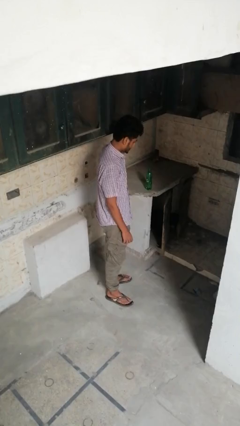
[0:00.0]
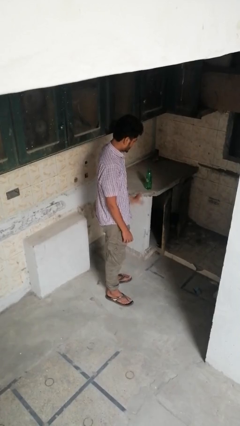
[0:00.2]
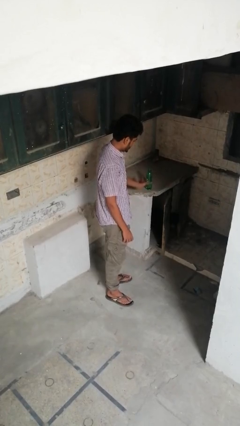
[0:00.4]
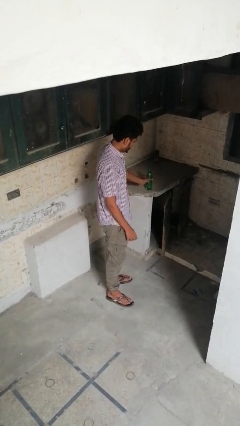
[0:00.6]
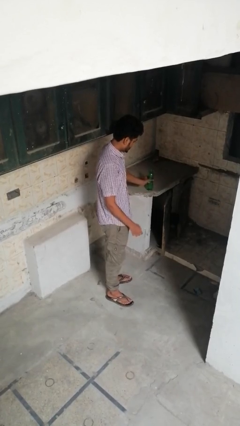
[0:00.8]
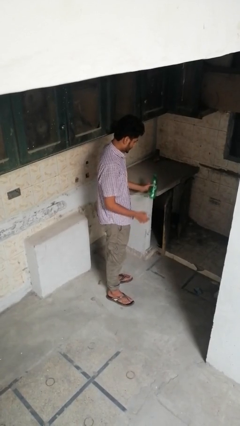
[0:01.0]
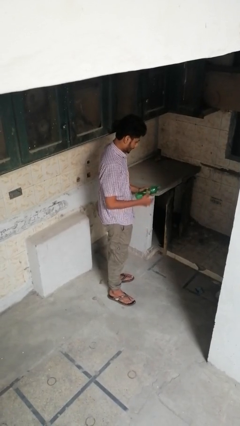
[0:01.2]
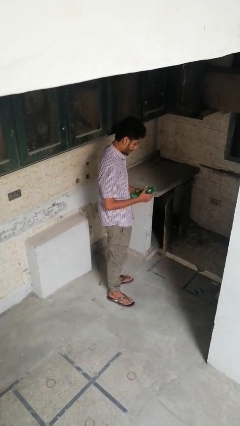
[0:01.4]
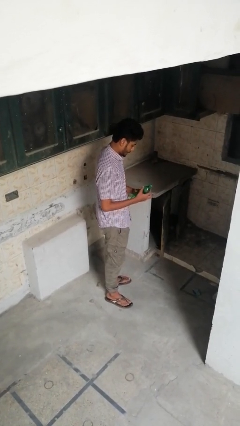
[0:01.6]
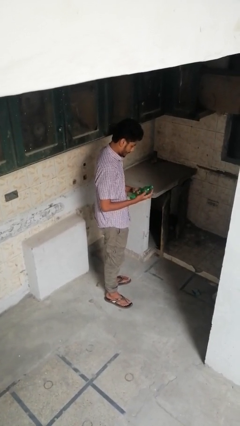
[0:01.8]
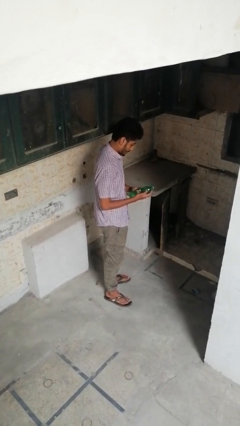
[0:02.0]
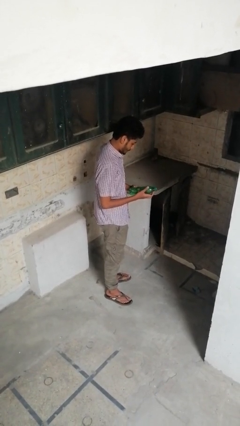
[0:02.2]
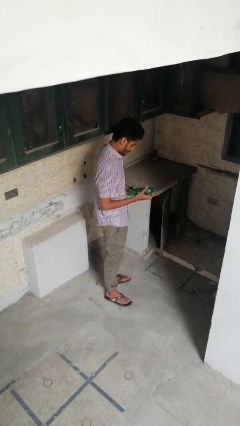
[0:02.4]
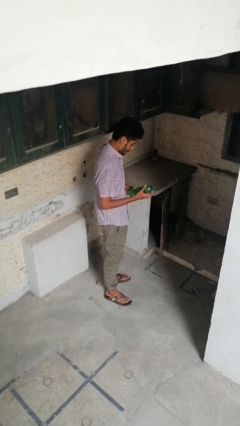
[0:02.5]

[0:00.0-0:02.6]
person picks up object from countertop

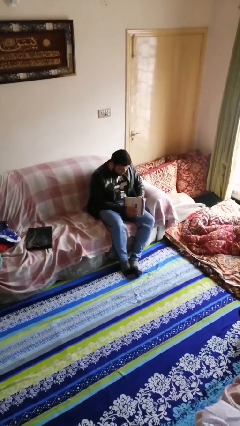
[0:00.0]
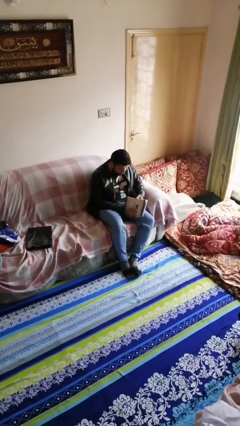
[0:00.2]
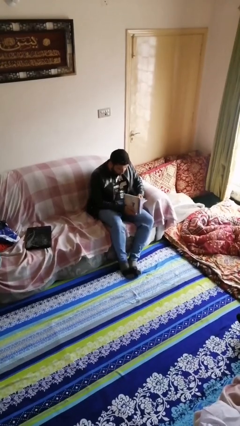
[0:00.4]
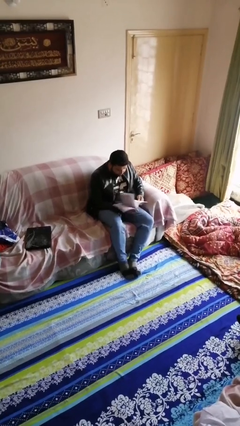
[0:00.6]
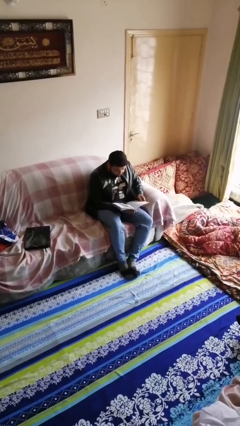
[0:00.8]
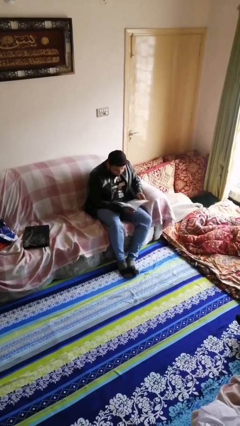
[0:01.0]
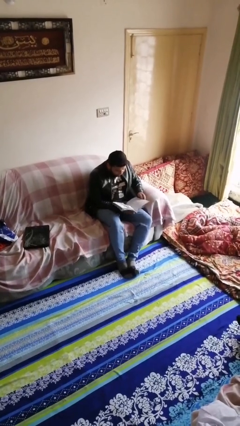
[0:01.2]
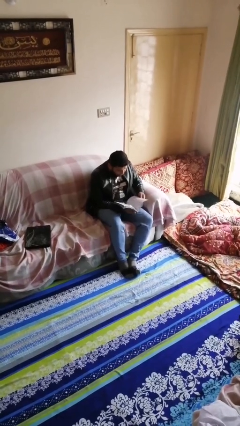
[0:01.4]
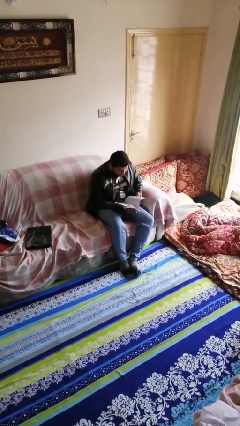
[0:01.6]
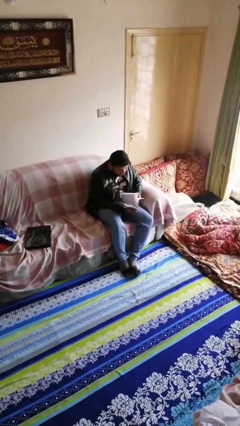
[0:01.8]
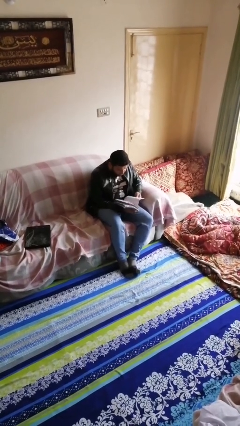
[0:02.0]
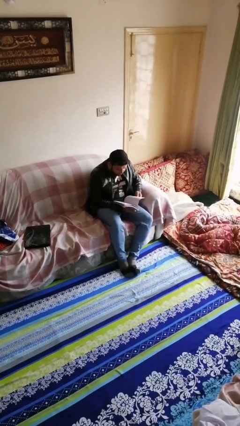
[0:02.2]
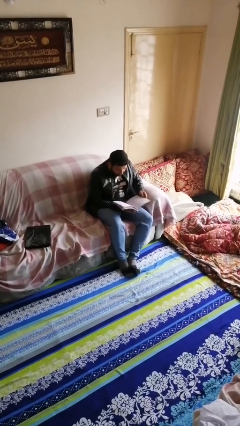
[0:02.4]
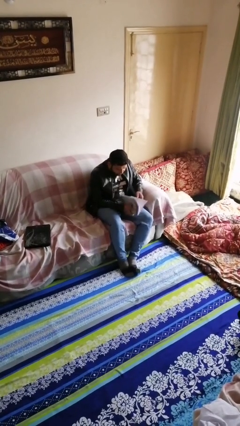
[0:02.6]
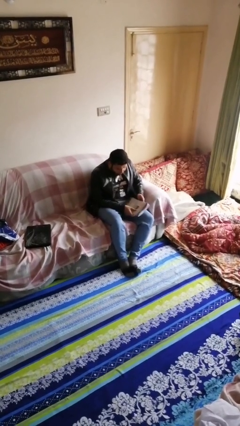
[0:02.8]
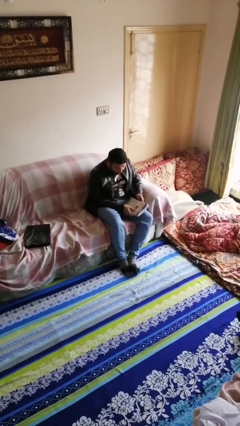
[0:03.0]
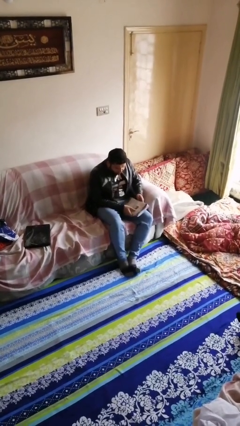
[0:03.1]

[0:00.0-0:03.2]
person reads document

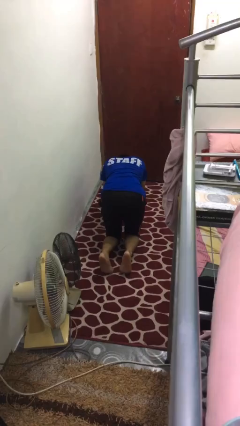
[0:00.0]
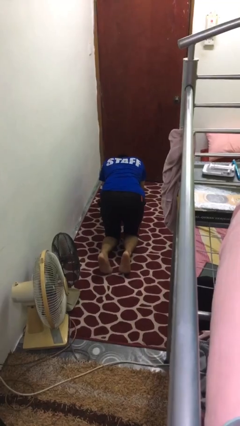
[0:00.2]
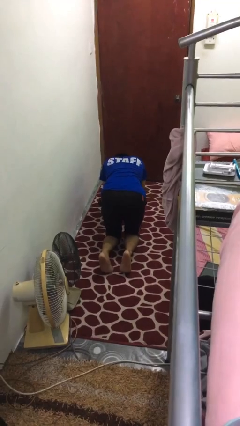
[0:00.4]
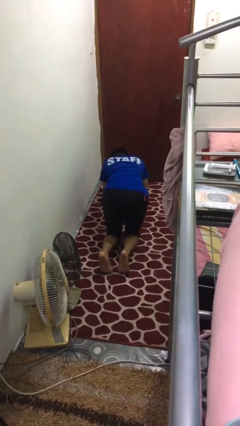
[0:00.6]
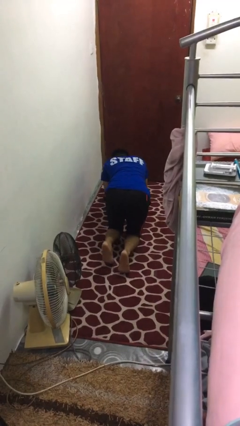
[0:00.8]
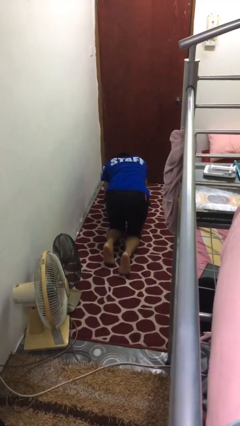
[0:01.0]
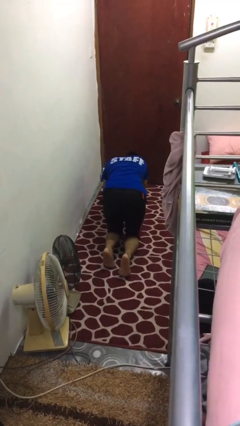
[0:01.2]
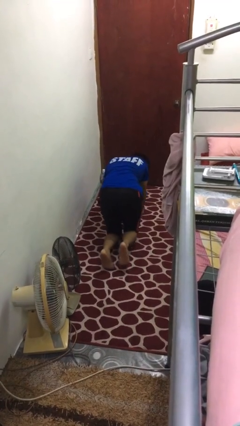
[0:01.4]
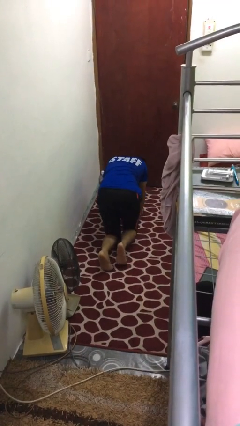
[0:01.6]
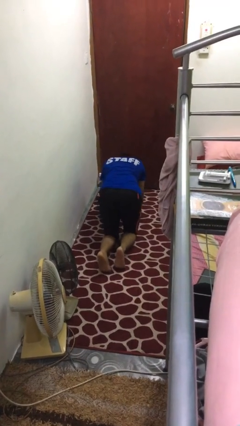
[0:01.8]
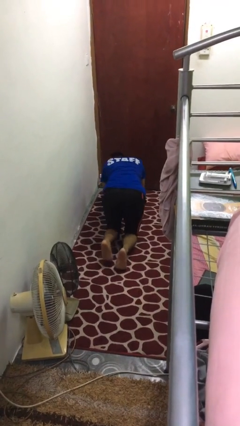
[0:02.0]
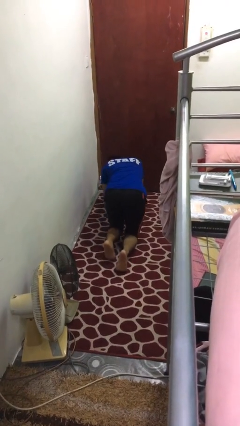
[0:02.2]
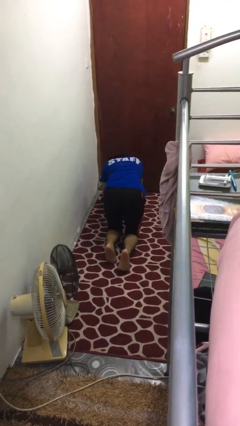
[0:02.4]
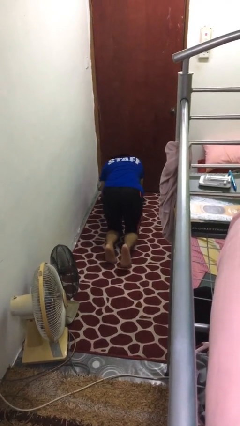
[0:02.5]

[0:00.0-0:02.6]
person crawls

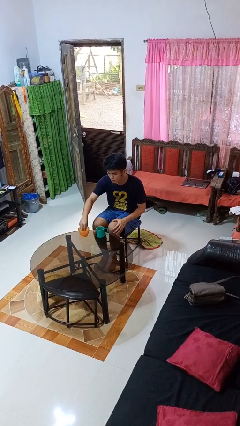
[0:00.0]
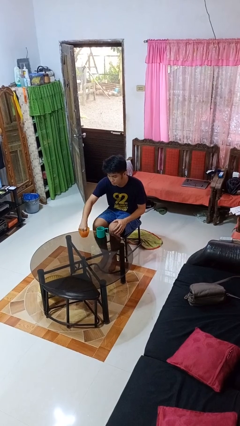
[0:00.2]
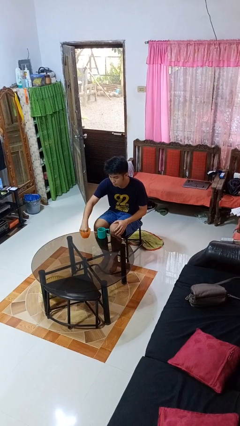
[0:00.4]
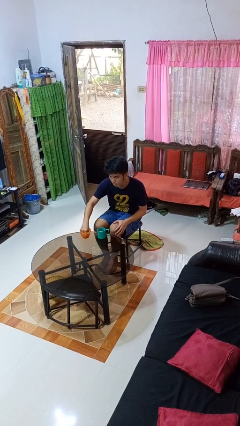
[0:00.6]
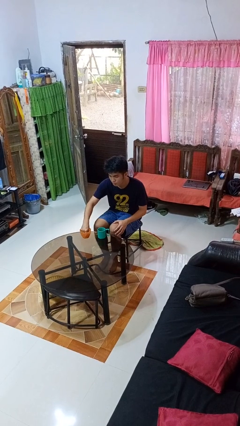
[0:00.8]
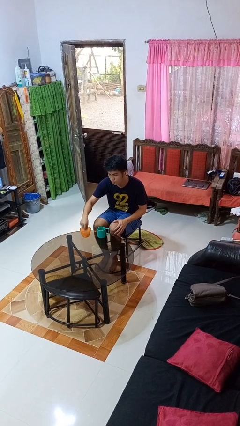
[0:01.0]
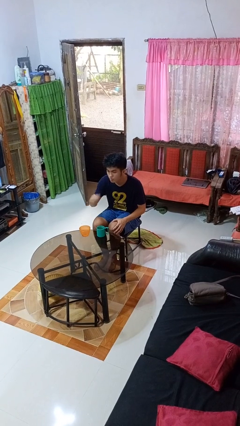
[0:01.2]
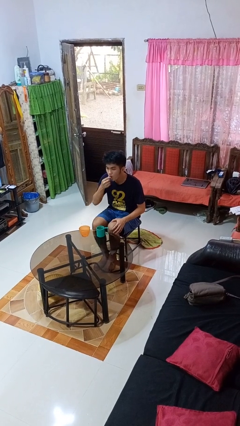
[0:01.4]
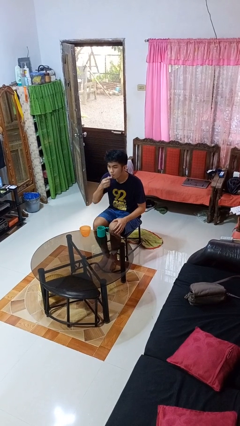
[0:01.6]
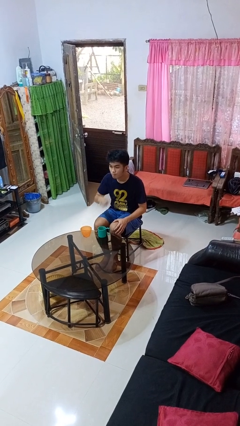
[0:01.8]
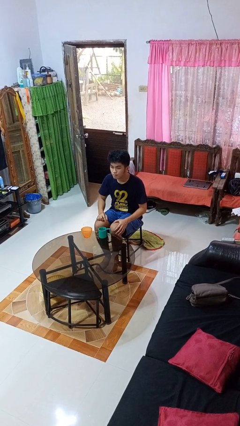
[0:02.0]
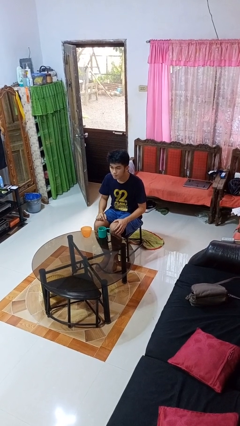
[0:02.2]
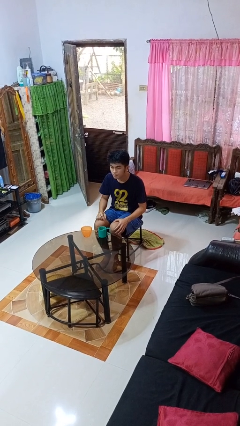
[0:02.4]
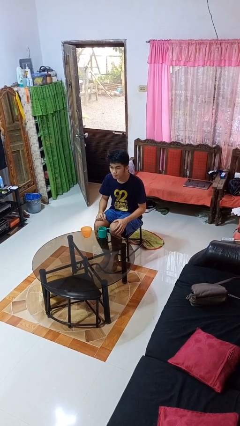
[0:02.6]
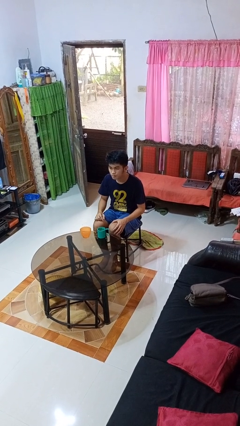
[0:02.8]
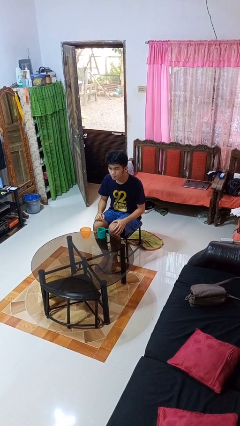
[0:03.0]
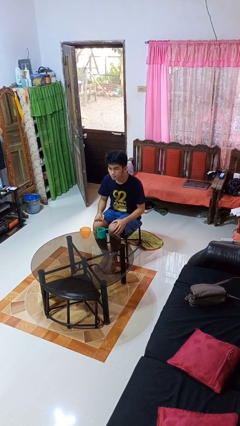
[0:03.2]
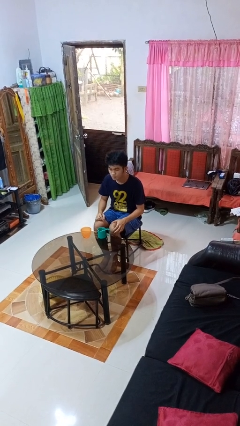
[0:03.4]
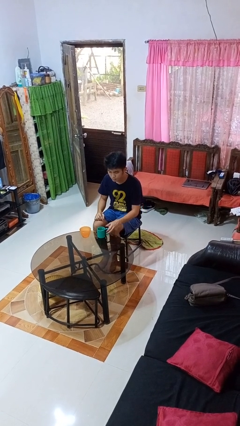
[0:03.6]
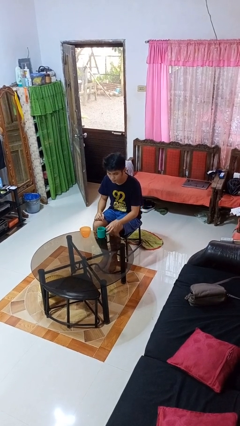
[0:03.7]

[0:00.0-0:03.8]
person takes medicine pills

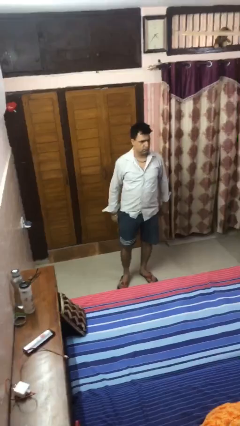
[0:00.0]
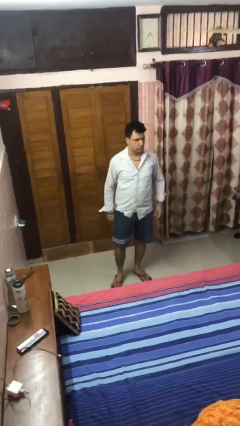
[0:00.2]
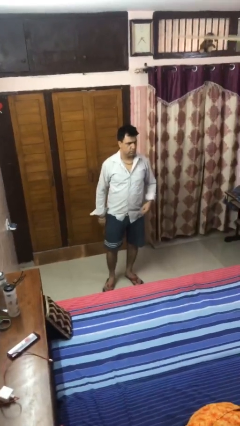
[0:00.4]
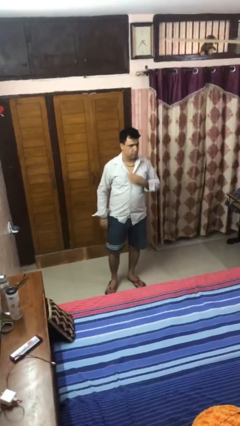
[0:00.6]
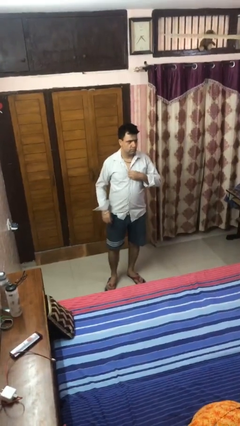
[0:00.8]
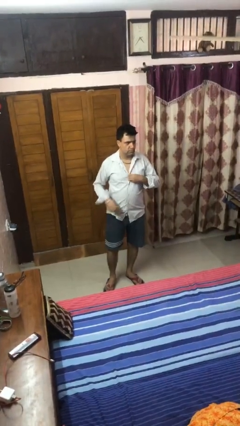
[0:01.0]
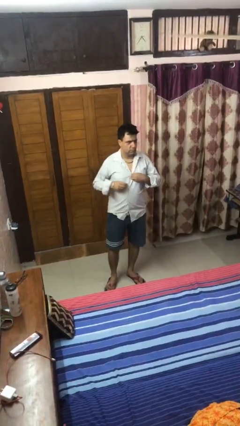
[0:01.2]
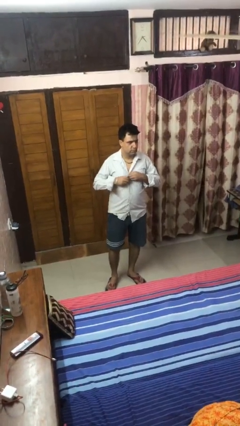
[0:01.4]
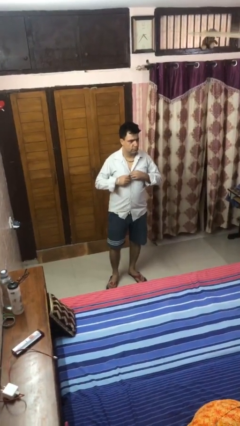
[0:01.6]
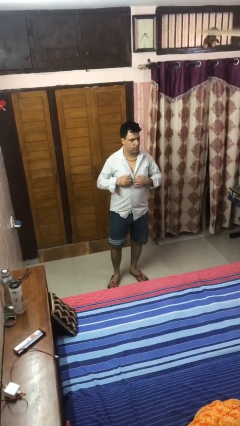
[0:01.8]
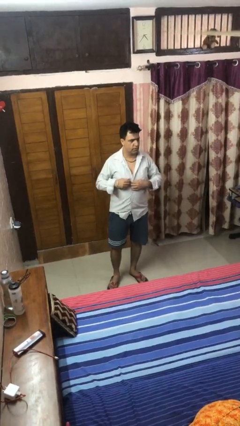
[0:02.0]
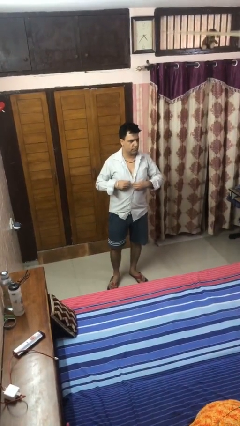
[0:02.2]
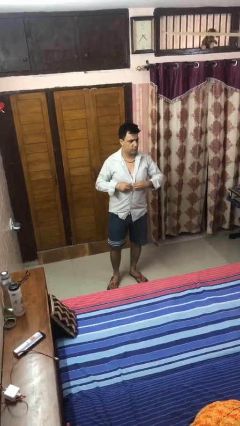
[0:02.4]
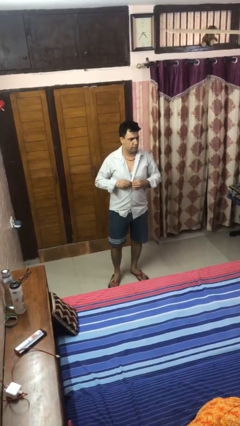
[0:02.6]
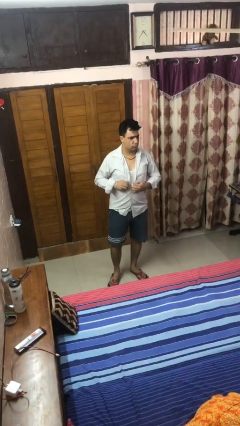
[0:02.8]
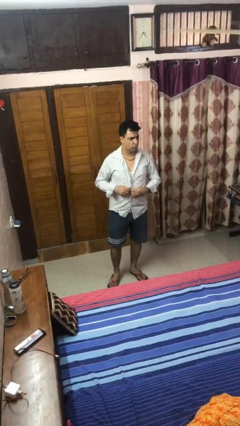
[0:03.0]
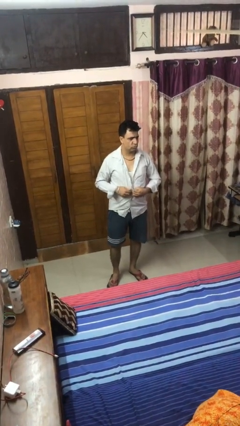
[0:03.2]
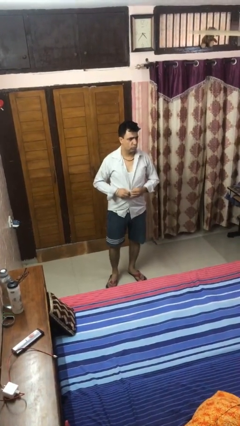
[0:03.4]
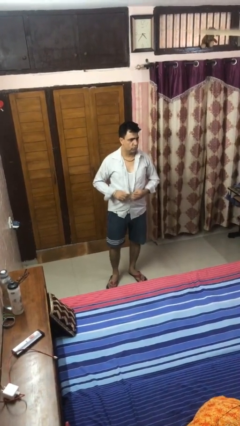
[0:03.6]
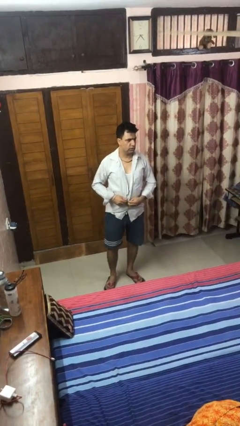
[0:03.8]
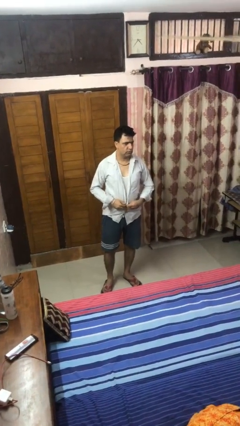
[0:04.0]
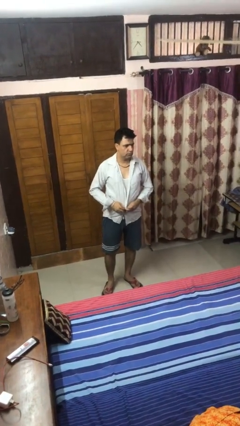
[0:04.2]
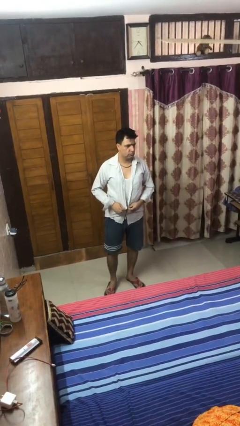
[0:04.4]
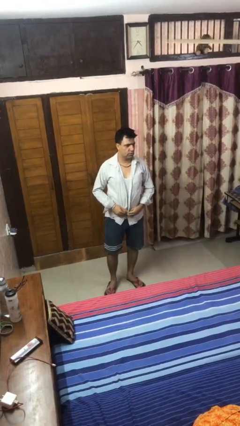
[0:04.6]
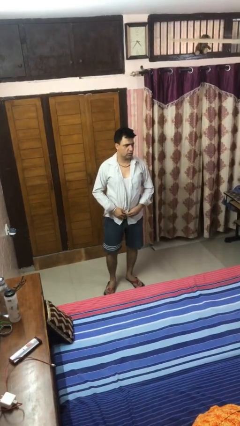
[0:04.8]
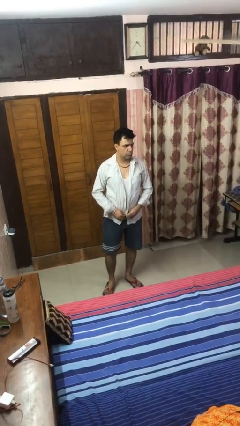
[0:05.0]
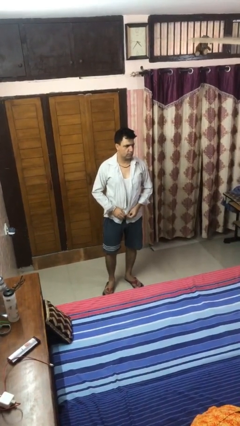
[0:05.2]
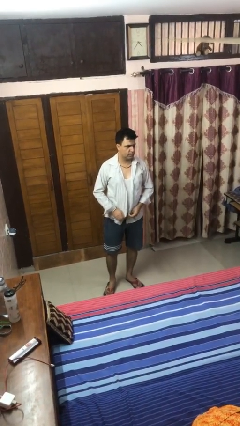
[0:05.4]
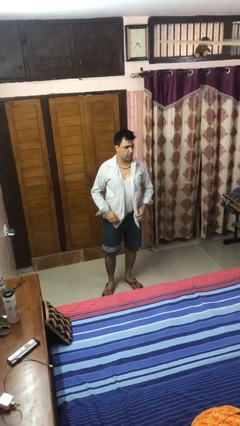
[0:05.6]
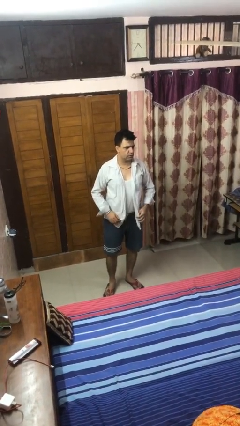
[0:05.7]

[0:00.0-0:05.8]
person unbuttons shirt
